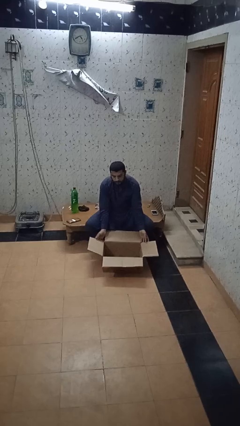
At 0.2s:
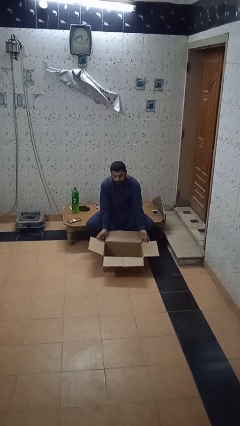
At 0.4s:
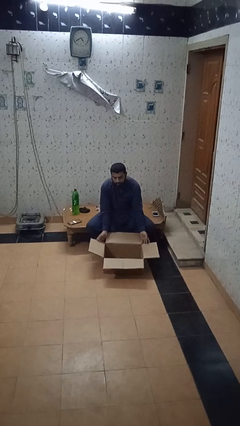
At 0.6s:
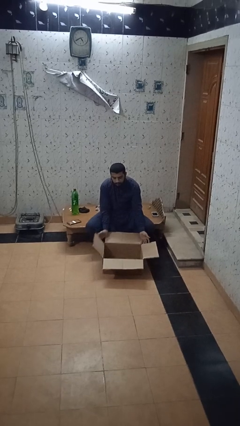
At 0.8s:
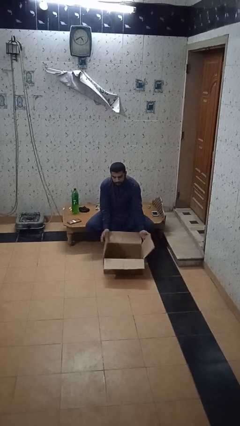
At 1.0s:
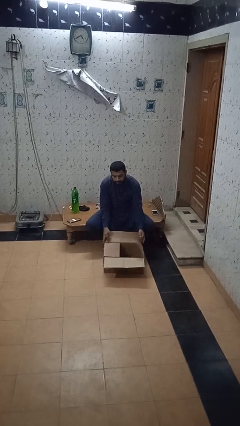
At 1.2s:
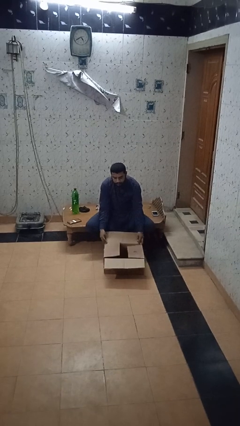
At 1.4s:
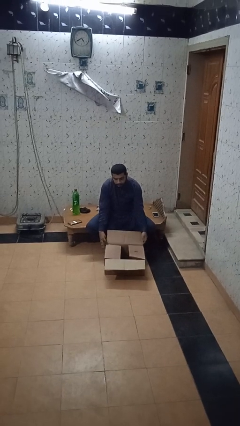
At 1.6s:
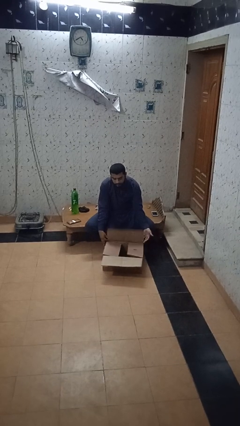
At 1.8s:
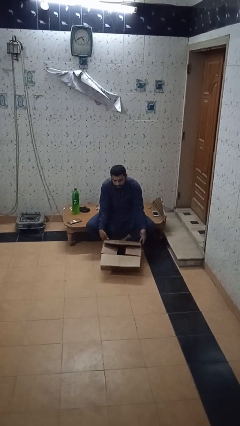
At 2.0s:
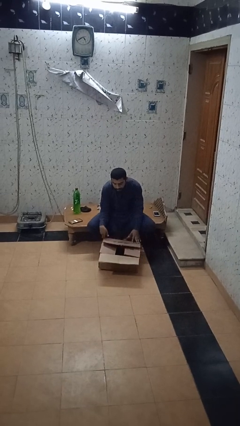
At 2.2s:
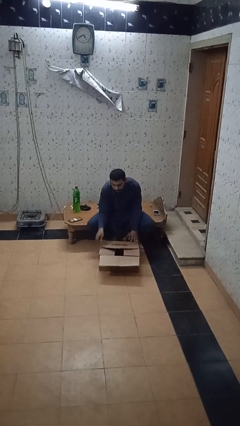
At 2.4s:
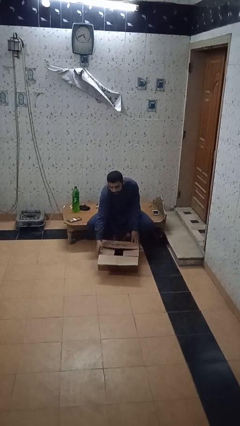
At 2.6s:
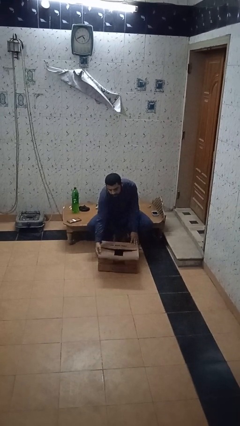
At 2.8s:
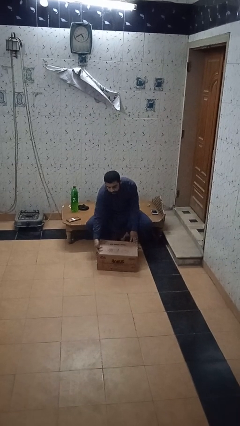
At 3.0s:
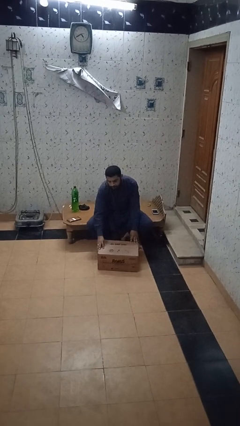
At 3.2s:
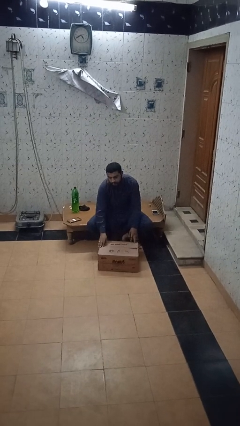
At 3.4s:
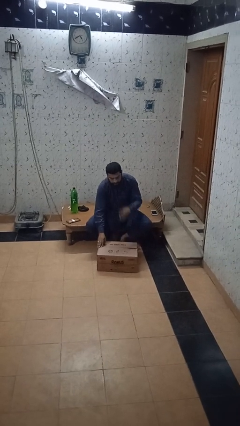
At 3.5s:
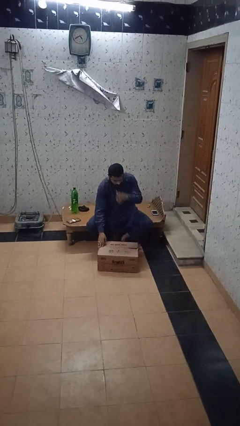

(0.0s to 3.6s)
person closes box

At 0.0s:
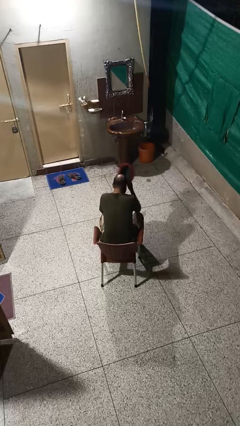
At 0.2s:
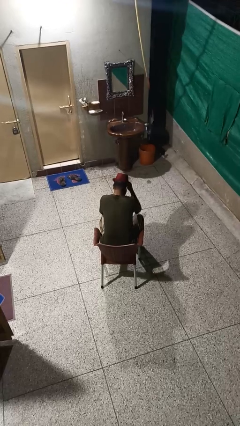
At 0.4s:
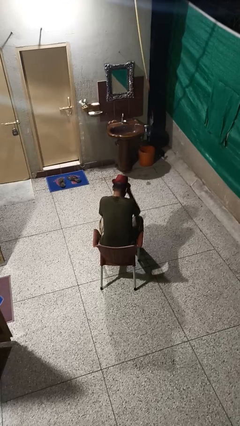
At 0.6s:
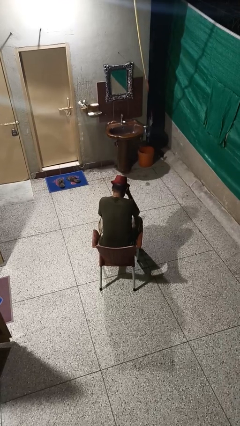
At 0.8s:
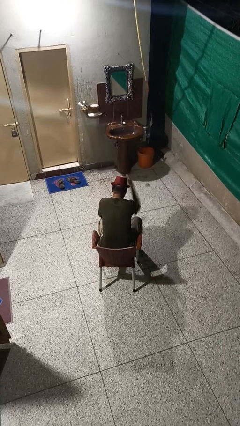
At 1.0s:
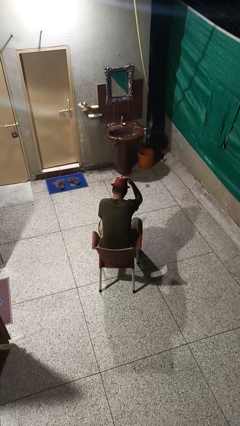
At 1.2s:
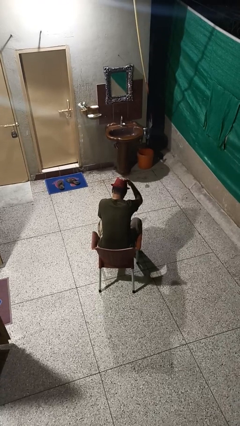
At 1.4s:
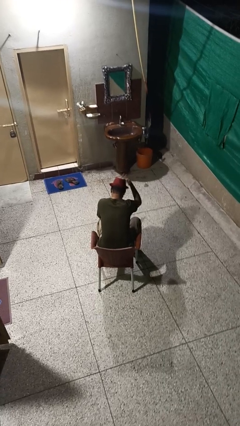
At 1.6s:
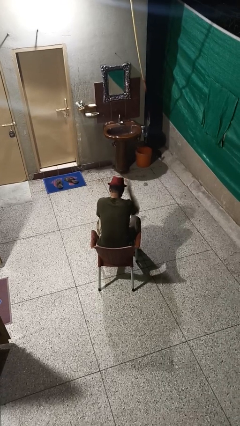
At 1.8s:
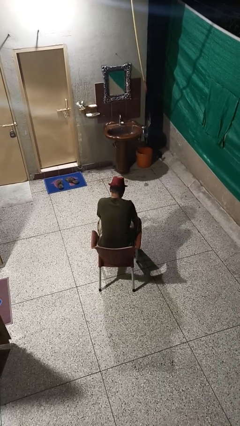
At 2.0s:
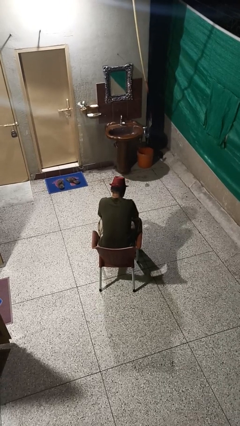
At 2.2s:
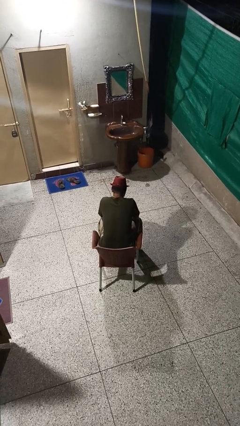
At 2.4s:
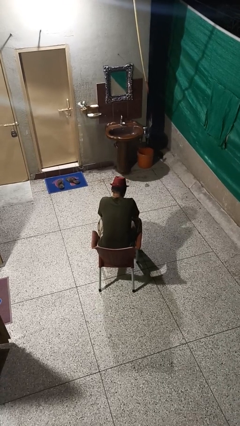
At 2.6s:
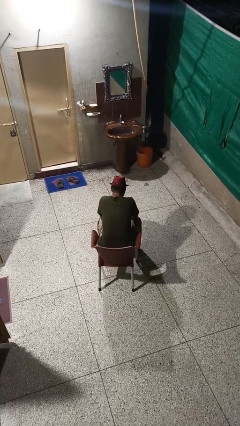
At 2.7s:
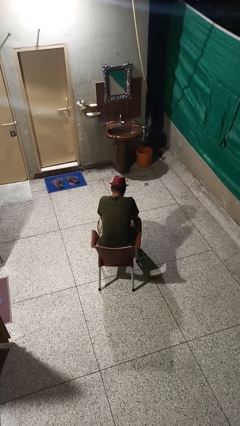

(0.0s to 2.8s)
person puts on hat

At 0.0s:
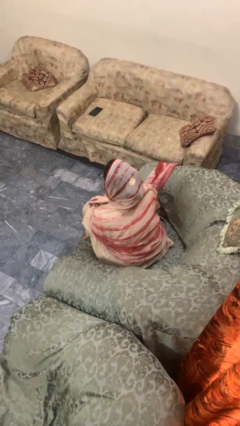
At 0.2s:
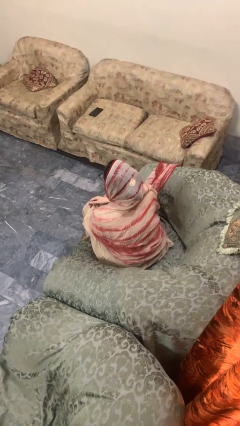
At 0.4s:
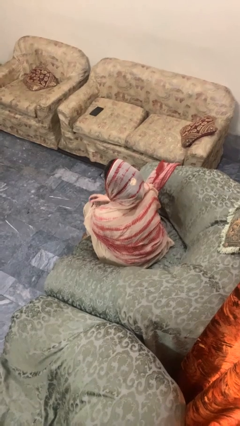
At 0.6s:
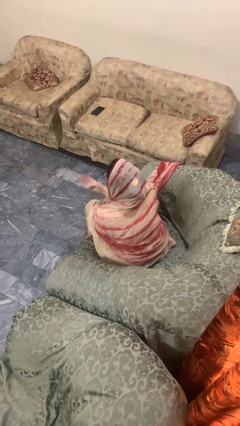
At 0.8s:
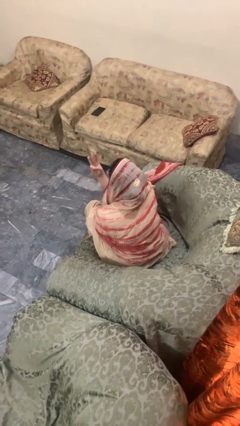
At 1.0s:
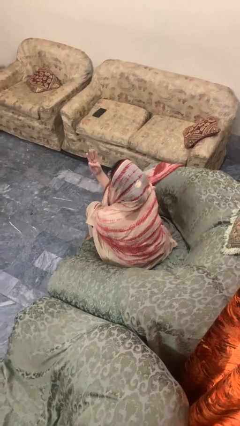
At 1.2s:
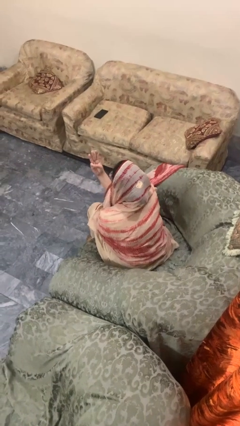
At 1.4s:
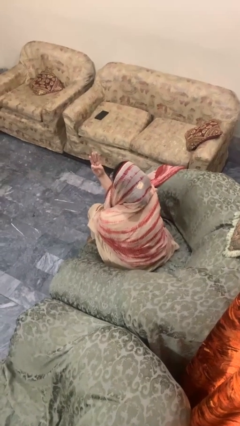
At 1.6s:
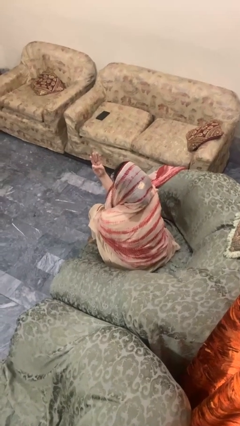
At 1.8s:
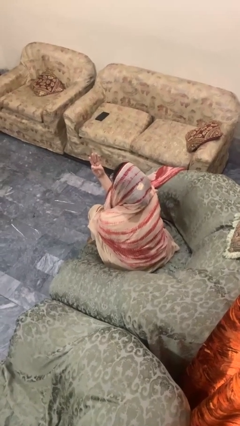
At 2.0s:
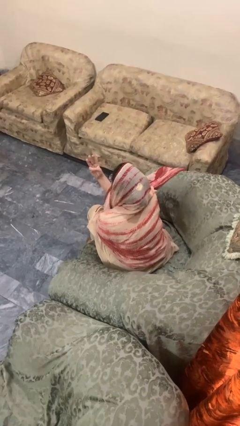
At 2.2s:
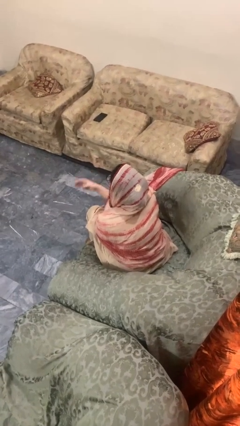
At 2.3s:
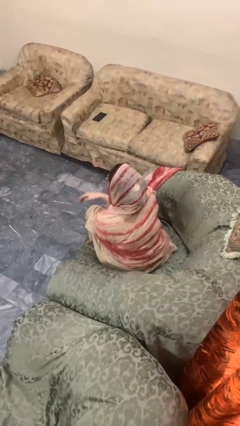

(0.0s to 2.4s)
person gestures number three

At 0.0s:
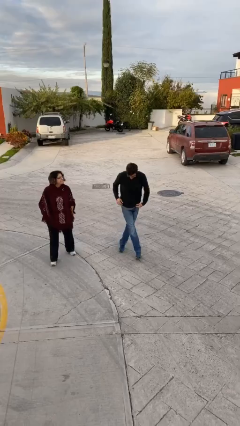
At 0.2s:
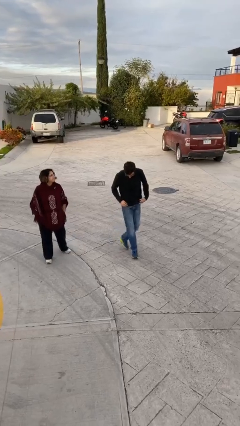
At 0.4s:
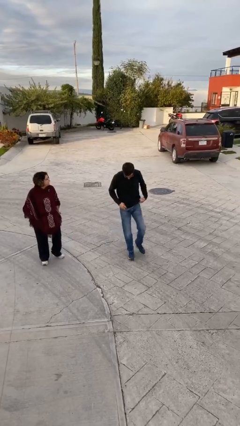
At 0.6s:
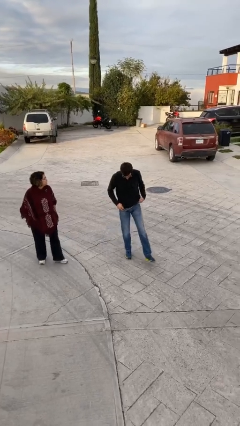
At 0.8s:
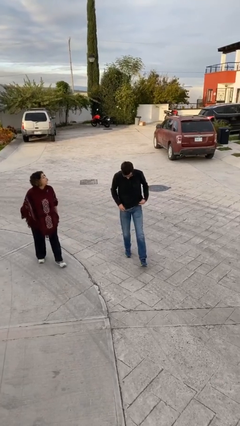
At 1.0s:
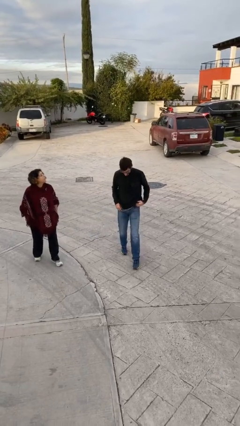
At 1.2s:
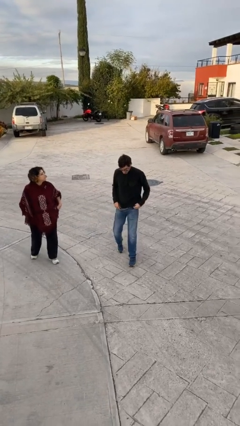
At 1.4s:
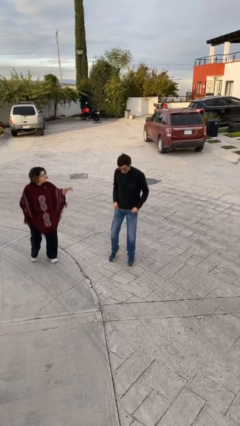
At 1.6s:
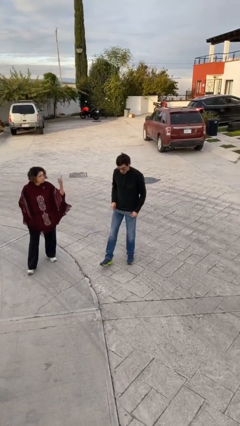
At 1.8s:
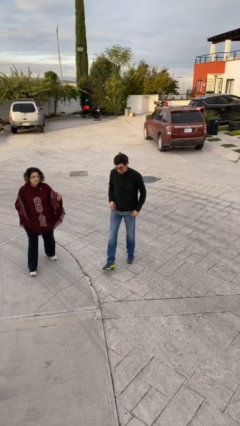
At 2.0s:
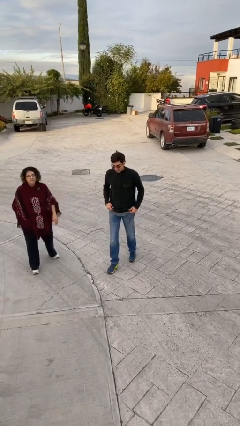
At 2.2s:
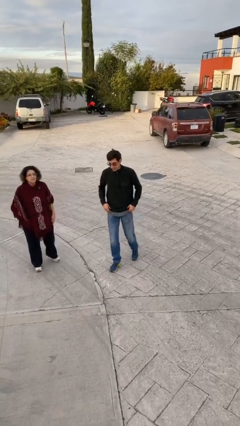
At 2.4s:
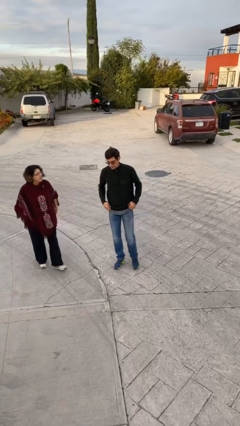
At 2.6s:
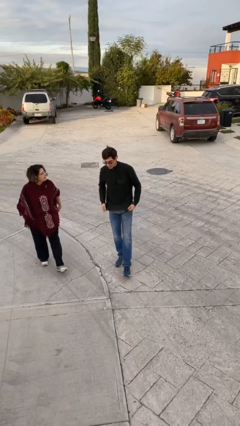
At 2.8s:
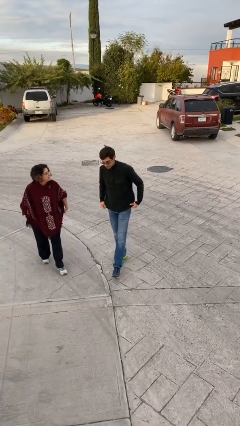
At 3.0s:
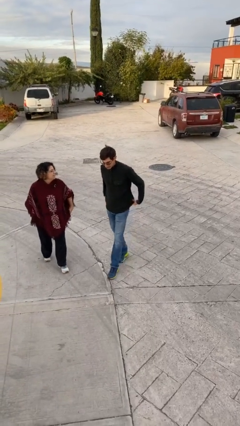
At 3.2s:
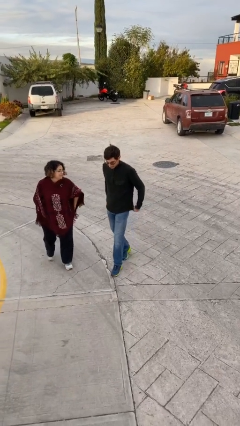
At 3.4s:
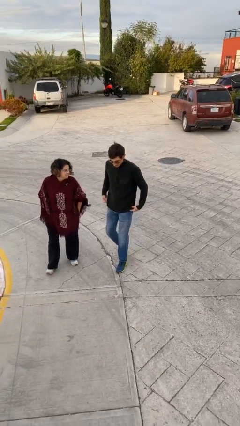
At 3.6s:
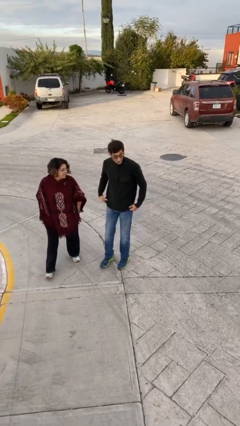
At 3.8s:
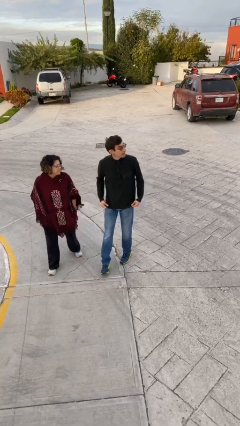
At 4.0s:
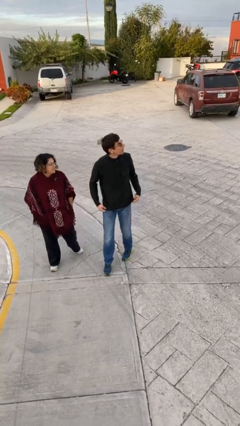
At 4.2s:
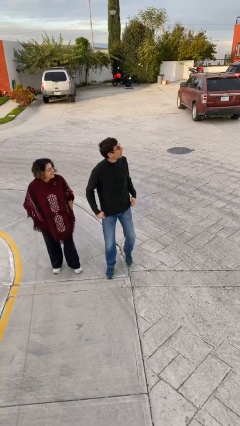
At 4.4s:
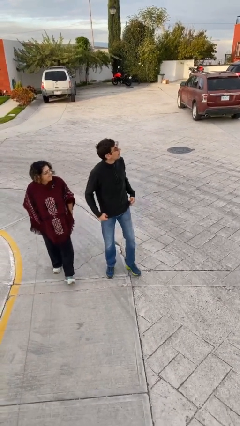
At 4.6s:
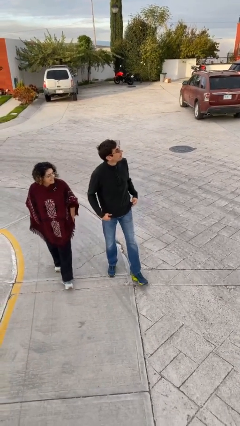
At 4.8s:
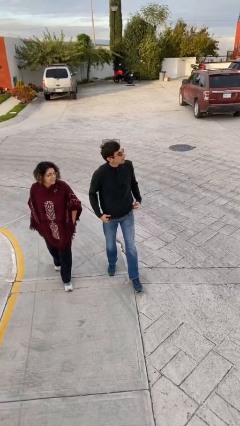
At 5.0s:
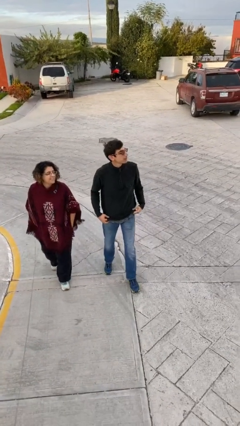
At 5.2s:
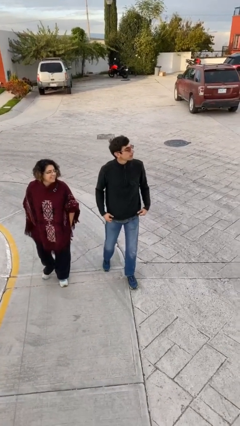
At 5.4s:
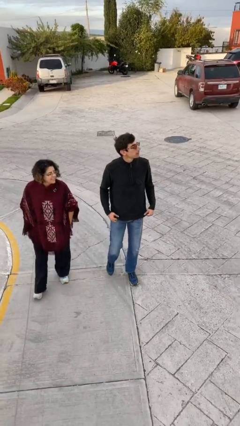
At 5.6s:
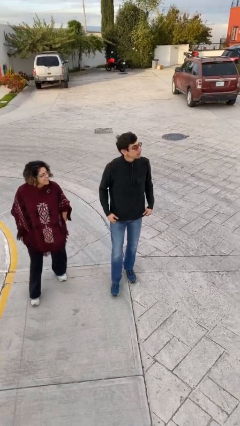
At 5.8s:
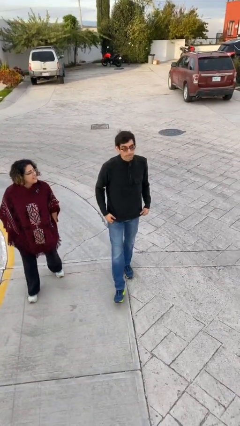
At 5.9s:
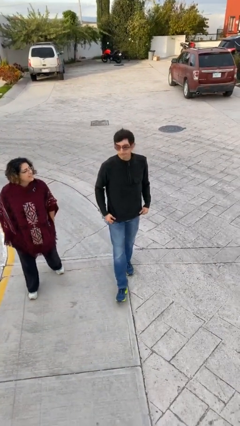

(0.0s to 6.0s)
person talks to person

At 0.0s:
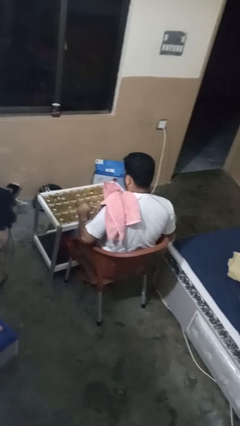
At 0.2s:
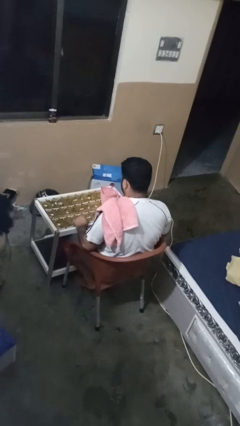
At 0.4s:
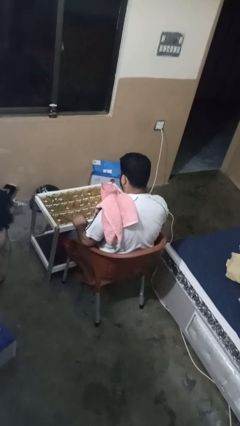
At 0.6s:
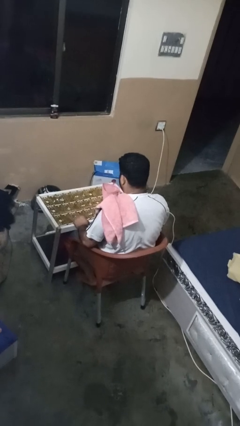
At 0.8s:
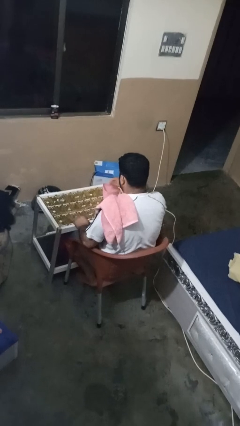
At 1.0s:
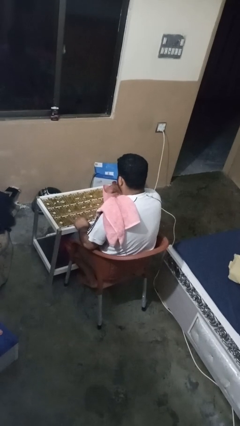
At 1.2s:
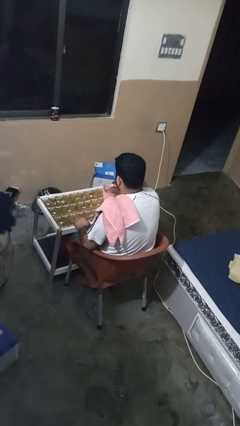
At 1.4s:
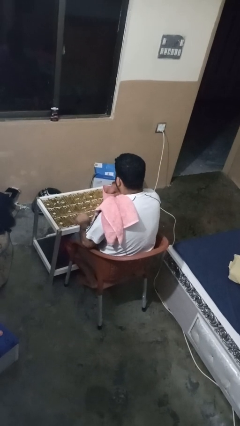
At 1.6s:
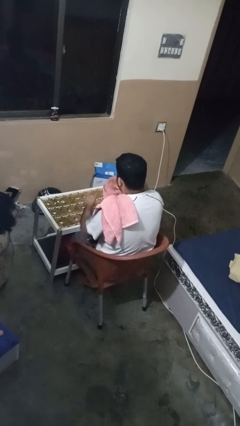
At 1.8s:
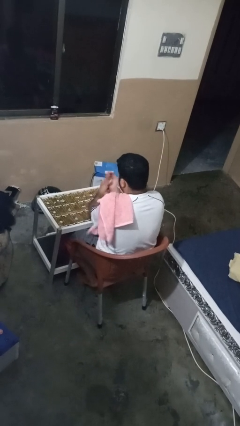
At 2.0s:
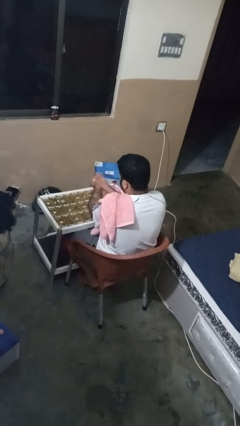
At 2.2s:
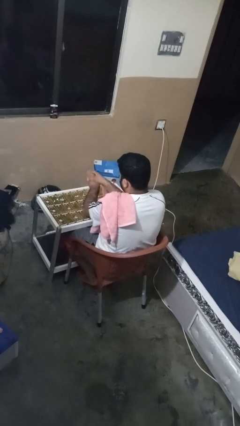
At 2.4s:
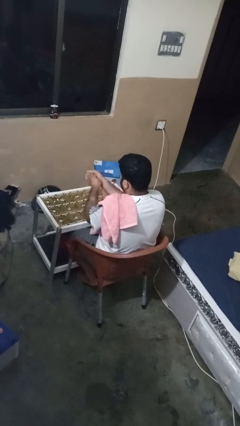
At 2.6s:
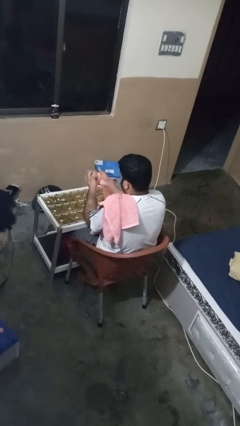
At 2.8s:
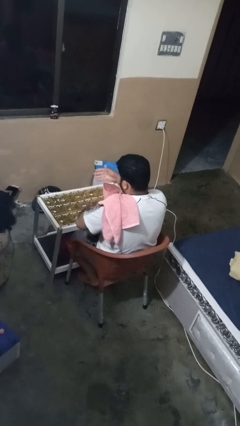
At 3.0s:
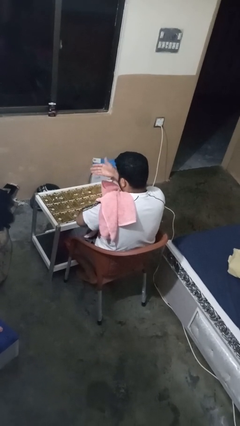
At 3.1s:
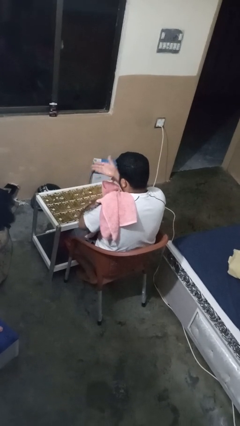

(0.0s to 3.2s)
person washes hands
